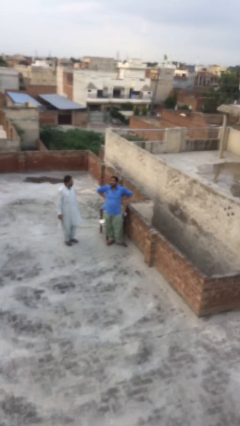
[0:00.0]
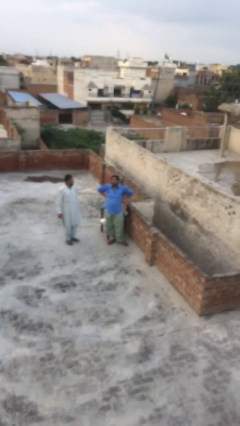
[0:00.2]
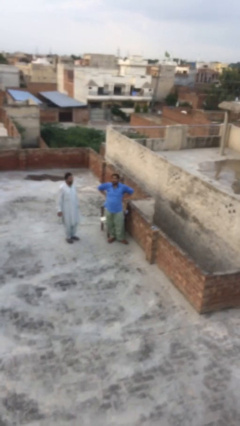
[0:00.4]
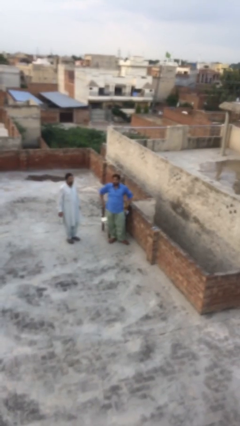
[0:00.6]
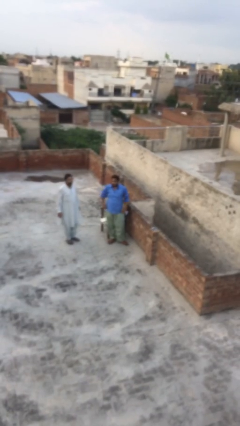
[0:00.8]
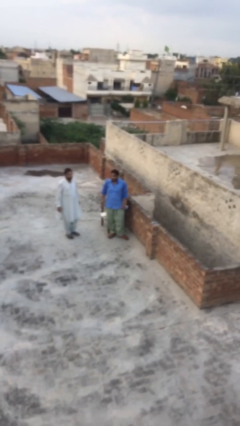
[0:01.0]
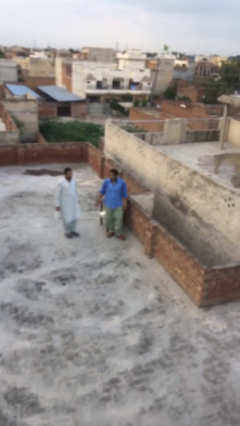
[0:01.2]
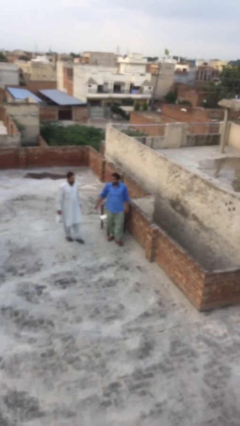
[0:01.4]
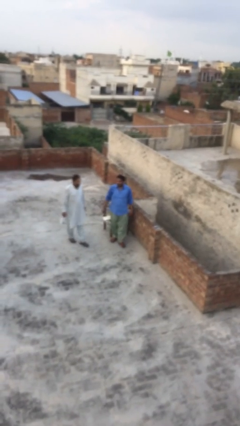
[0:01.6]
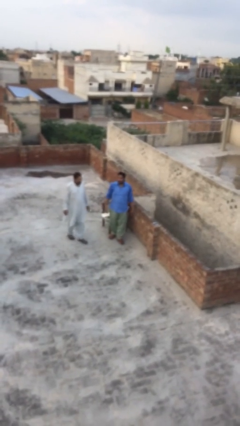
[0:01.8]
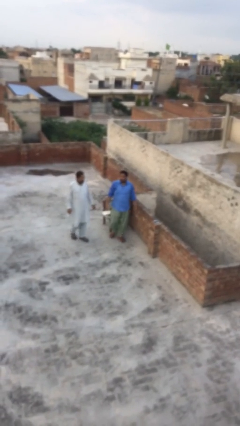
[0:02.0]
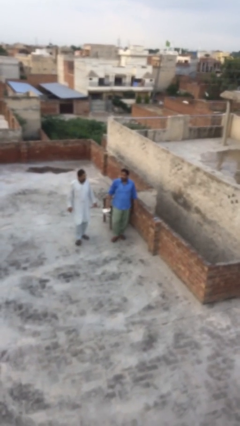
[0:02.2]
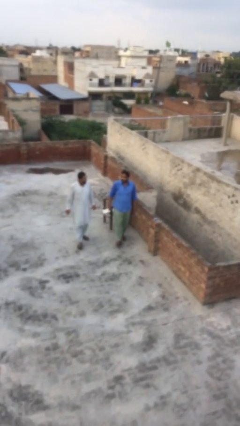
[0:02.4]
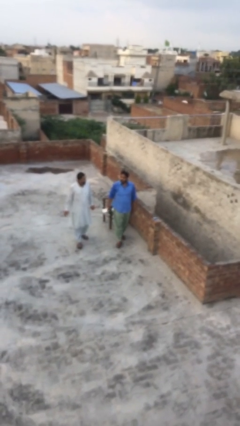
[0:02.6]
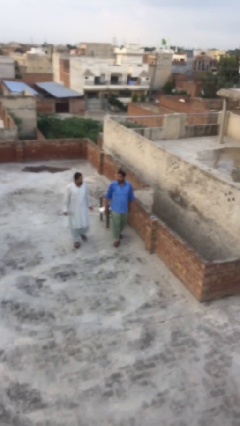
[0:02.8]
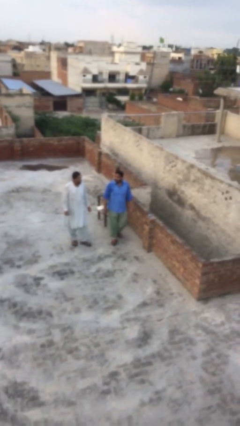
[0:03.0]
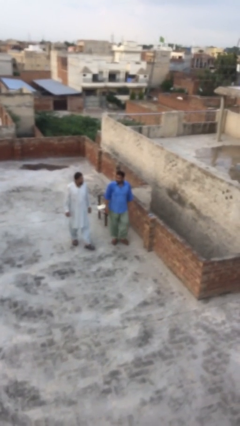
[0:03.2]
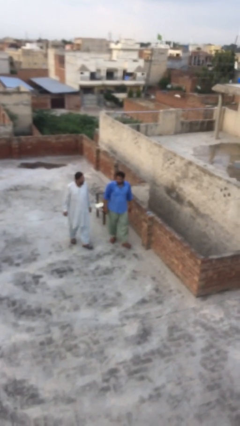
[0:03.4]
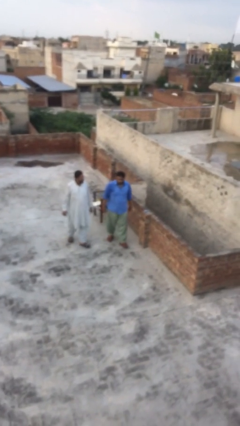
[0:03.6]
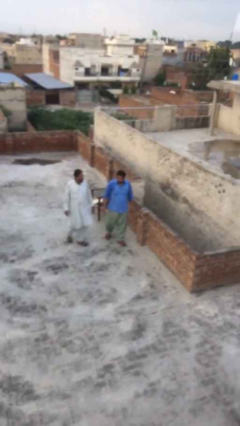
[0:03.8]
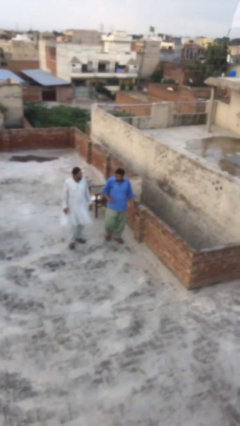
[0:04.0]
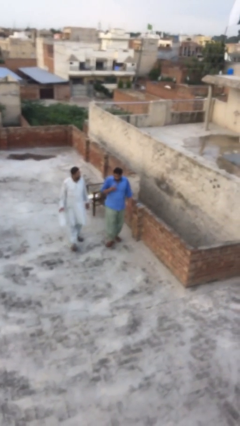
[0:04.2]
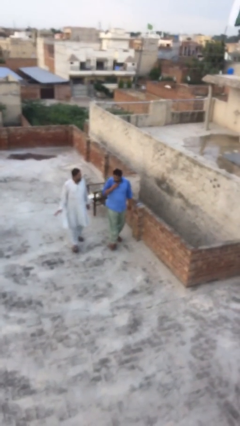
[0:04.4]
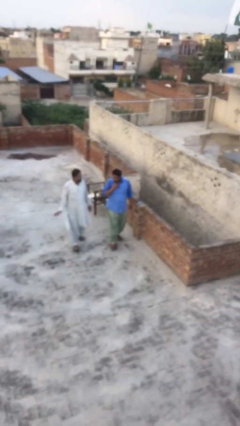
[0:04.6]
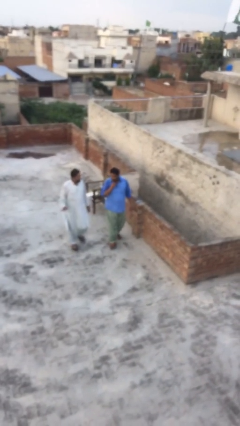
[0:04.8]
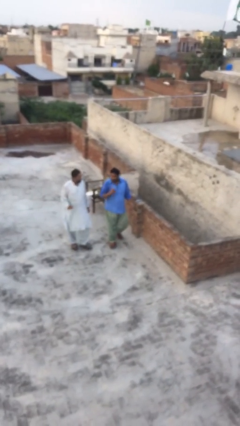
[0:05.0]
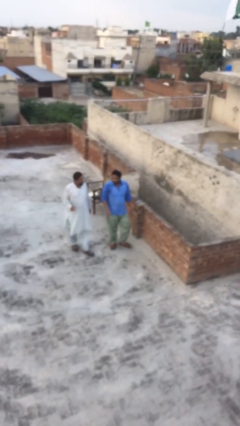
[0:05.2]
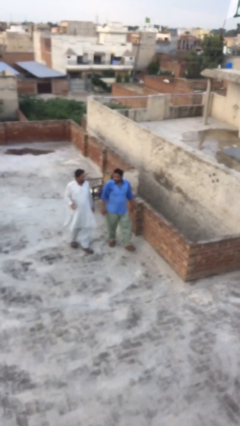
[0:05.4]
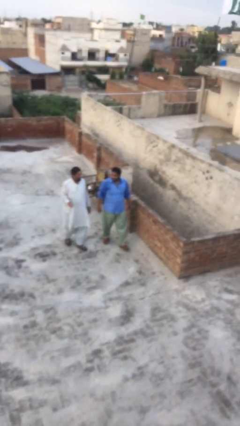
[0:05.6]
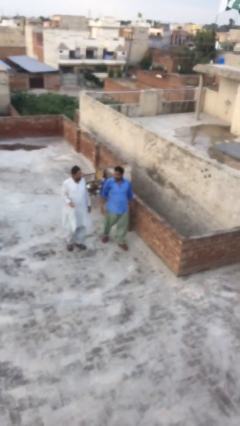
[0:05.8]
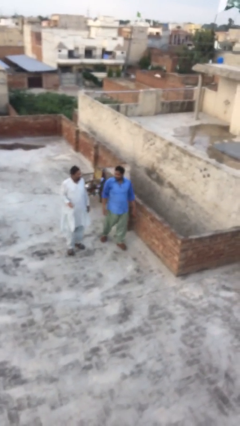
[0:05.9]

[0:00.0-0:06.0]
person talks to person

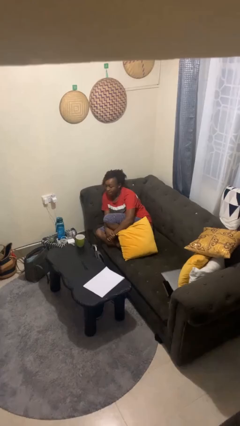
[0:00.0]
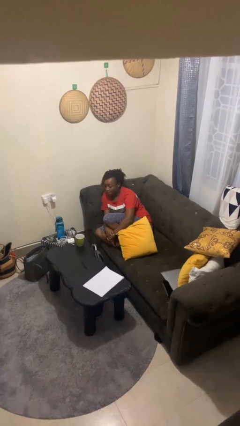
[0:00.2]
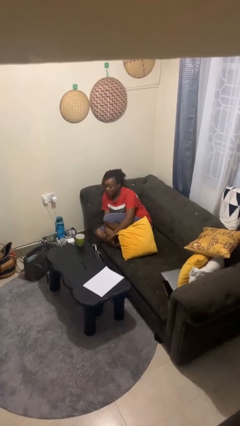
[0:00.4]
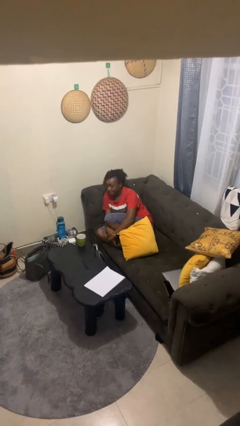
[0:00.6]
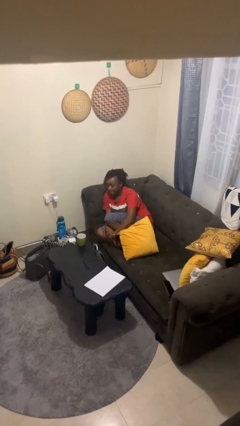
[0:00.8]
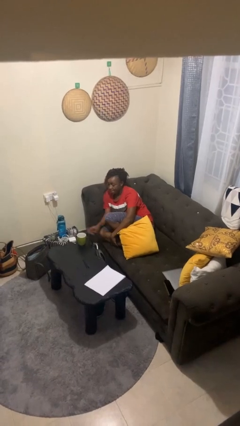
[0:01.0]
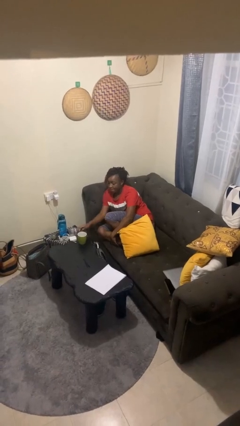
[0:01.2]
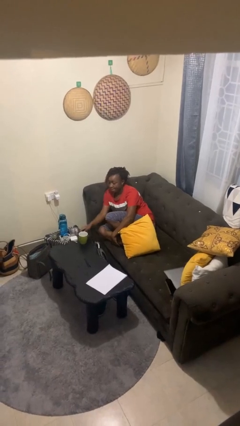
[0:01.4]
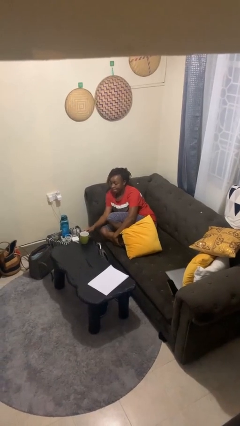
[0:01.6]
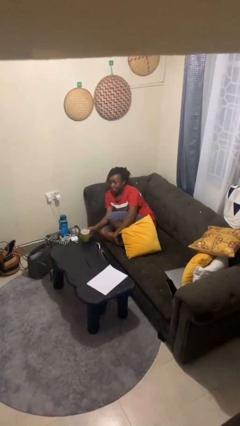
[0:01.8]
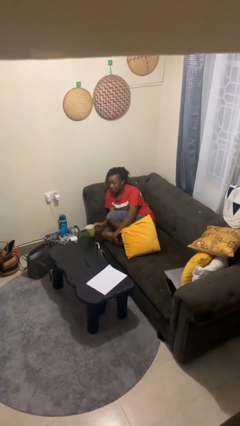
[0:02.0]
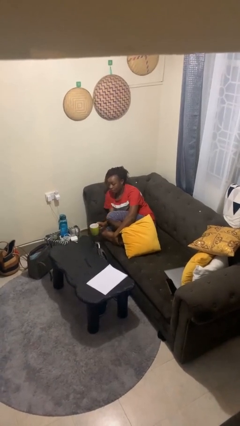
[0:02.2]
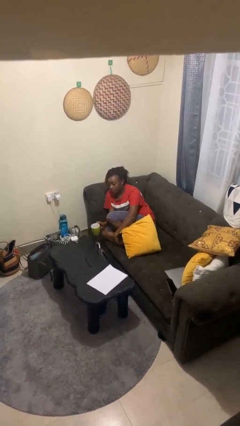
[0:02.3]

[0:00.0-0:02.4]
person picks up object from table

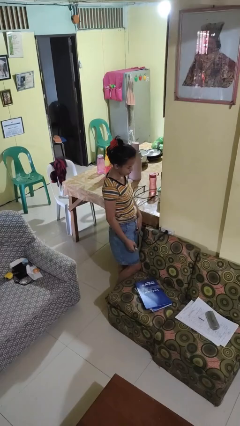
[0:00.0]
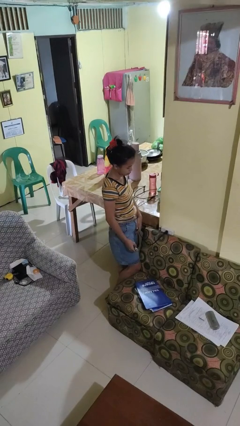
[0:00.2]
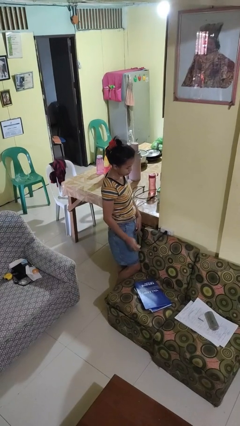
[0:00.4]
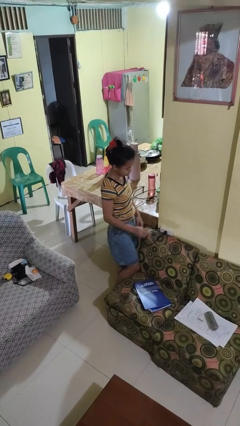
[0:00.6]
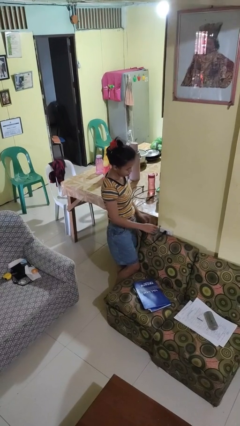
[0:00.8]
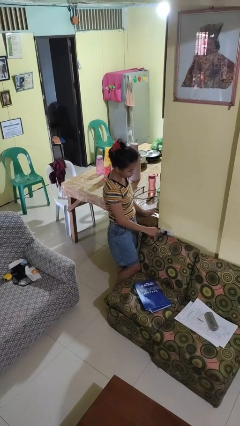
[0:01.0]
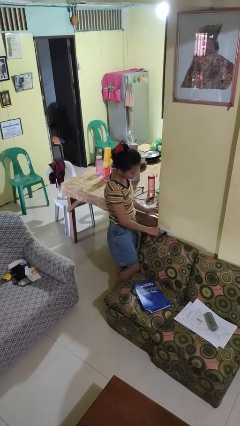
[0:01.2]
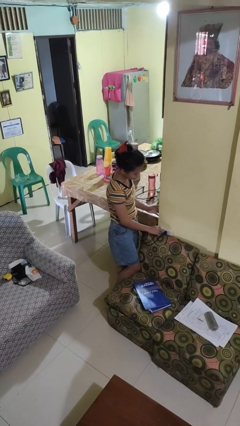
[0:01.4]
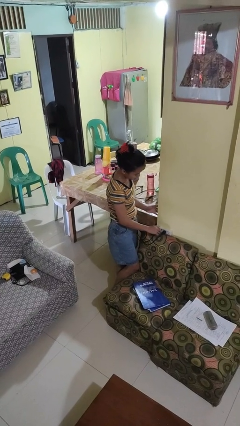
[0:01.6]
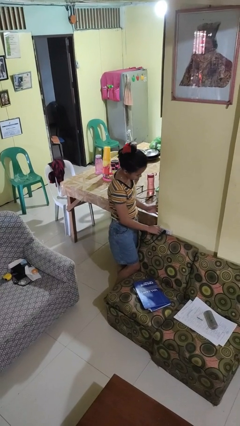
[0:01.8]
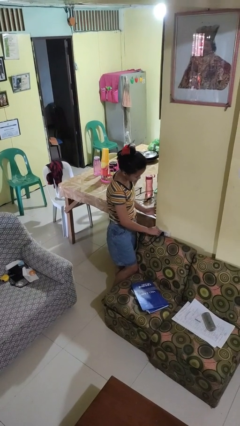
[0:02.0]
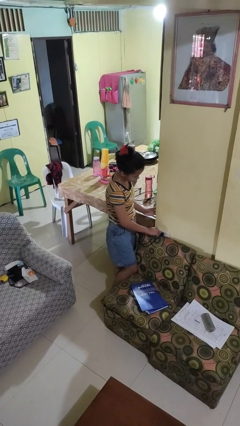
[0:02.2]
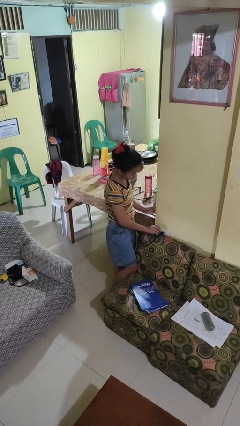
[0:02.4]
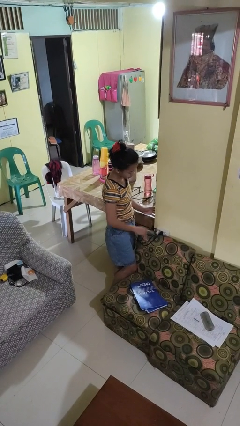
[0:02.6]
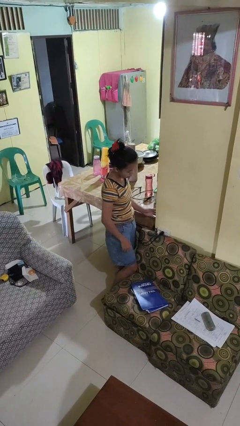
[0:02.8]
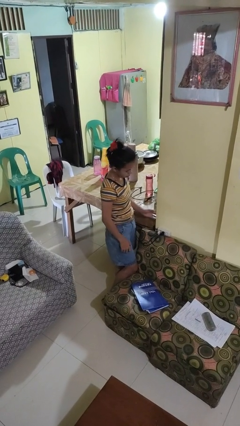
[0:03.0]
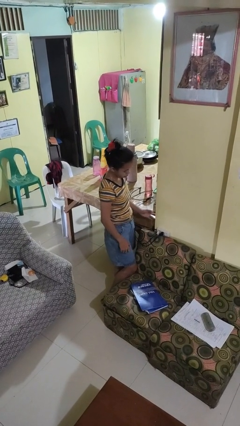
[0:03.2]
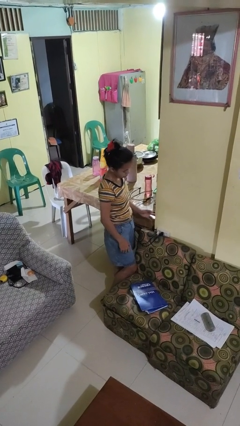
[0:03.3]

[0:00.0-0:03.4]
person plugs into electrical socket

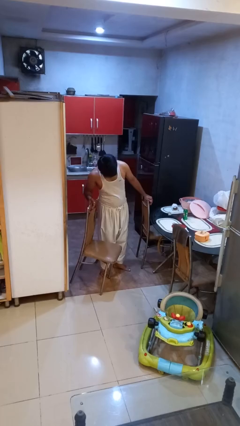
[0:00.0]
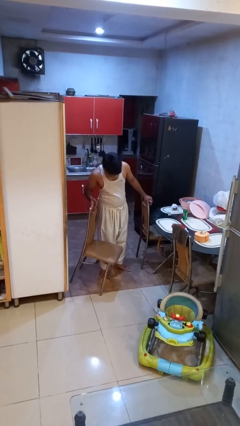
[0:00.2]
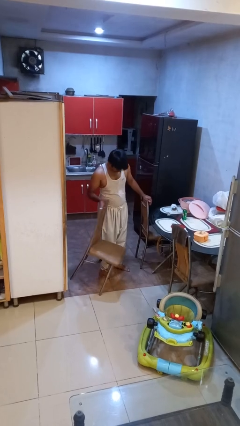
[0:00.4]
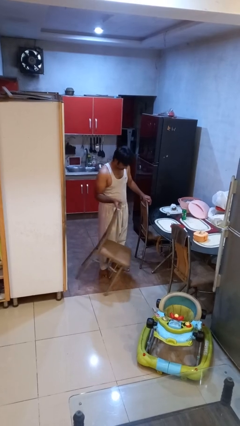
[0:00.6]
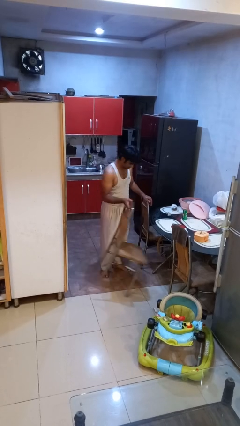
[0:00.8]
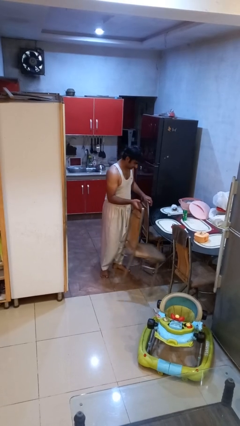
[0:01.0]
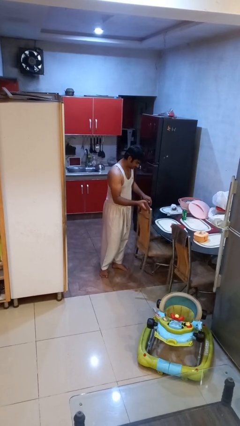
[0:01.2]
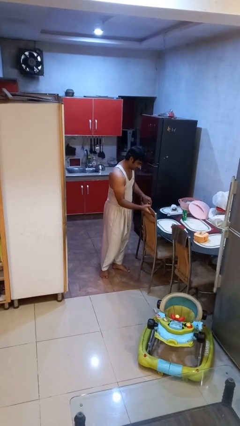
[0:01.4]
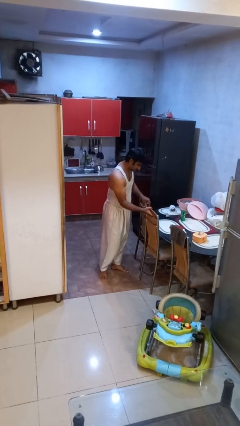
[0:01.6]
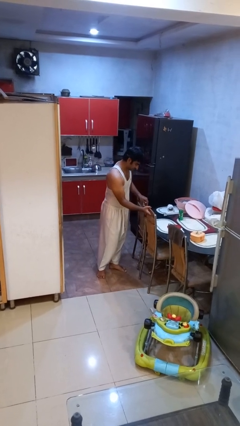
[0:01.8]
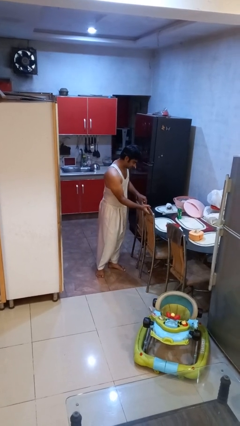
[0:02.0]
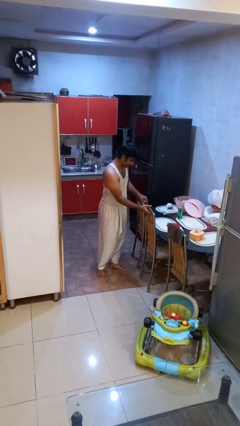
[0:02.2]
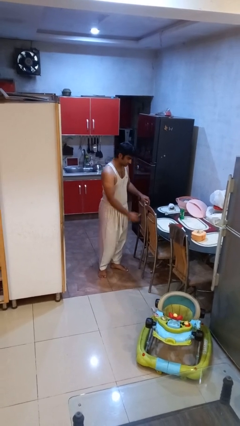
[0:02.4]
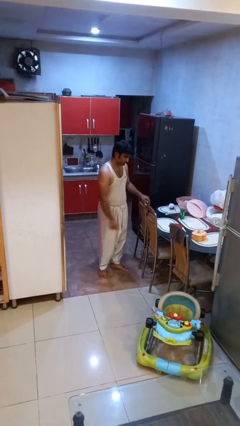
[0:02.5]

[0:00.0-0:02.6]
person pushes in chair

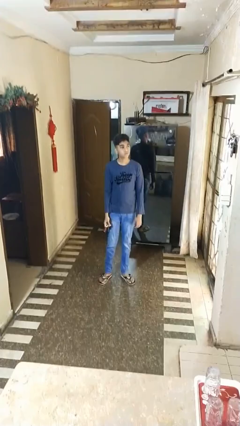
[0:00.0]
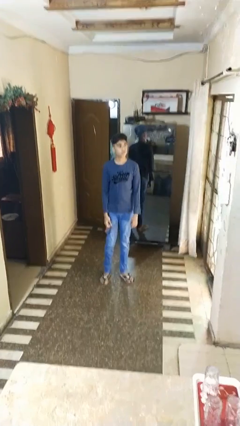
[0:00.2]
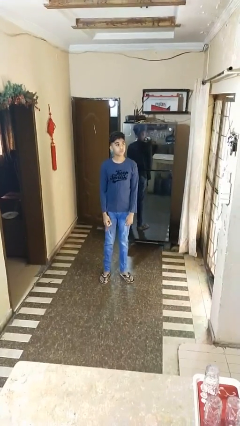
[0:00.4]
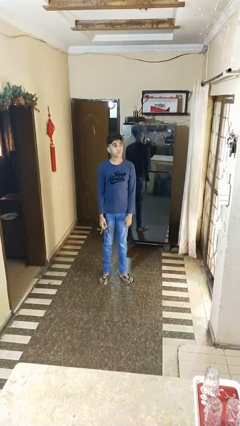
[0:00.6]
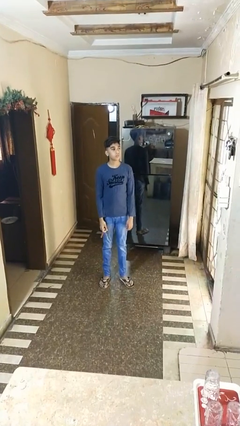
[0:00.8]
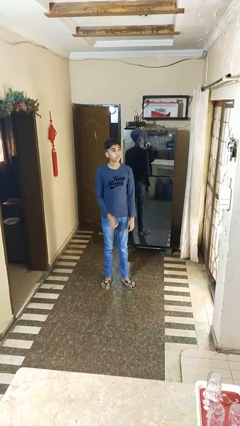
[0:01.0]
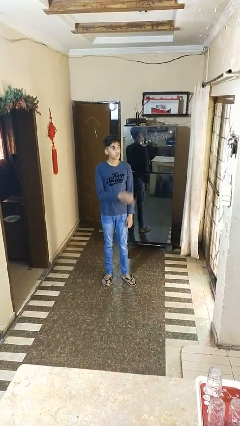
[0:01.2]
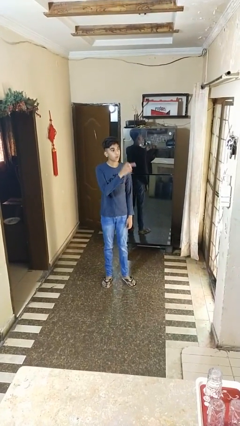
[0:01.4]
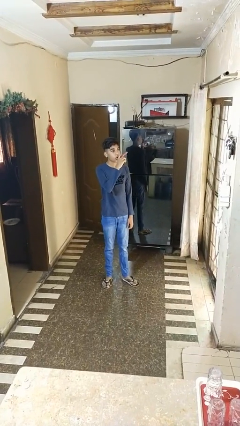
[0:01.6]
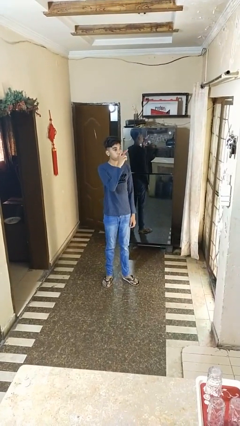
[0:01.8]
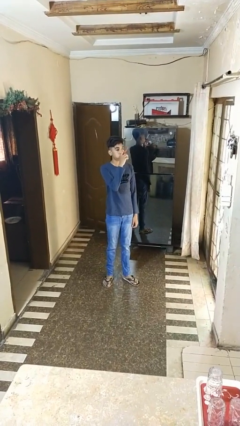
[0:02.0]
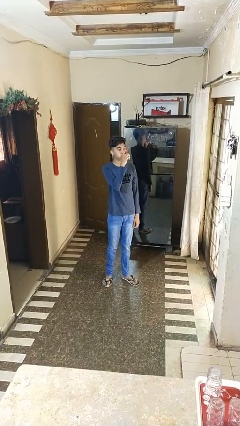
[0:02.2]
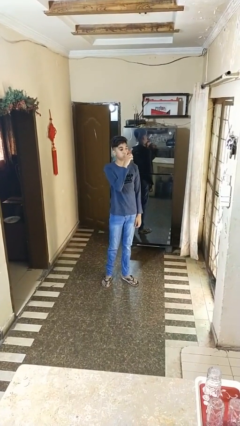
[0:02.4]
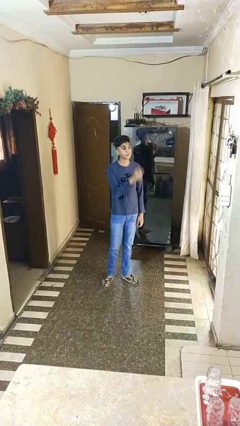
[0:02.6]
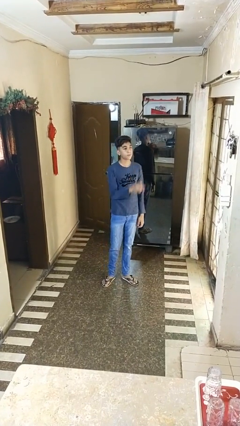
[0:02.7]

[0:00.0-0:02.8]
person vapes

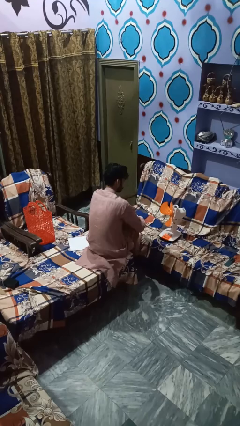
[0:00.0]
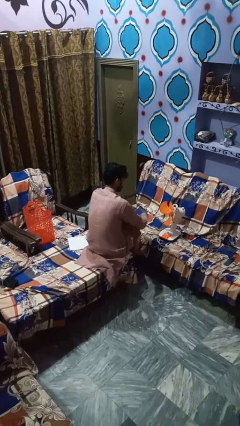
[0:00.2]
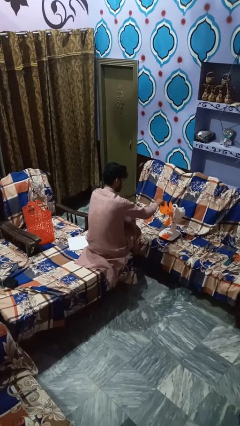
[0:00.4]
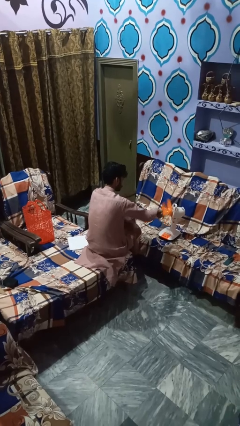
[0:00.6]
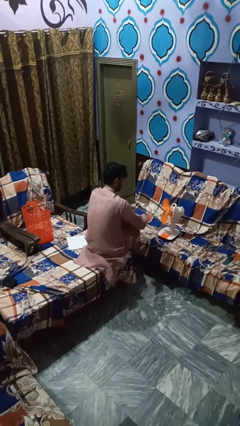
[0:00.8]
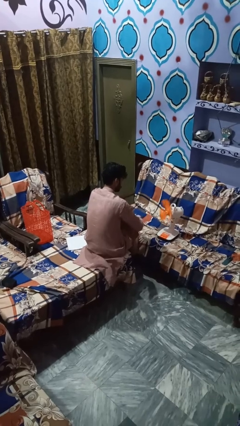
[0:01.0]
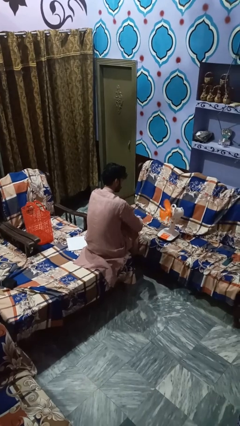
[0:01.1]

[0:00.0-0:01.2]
person turns on fan
